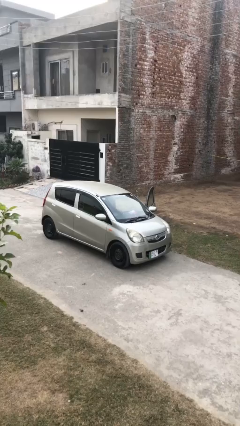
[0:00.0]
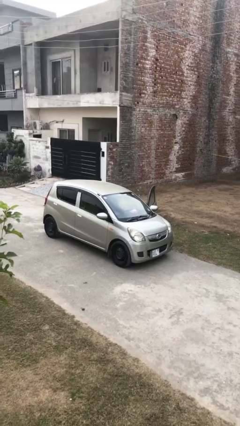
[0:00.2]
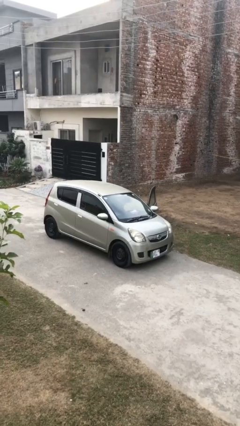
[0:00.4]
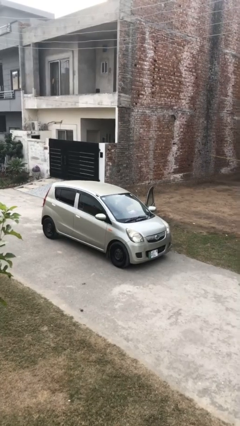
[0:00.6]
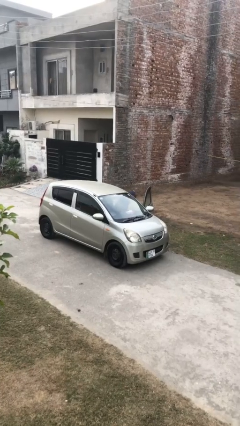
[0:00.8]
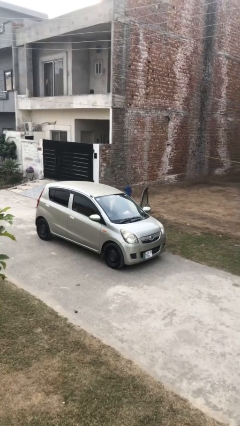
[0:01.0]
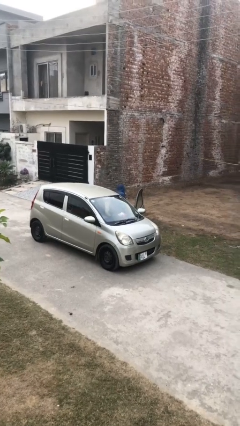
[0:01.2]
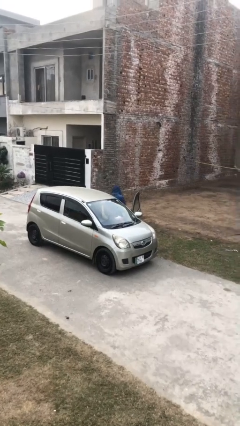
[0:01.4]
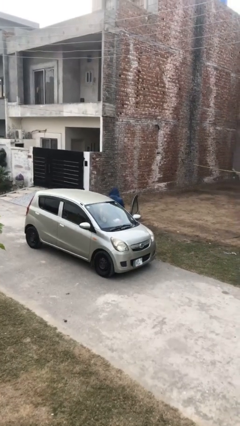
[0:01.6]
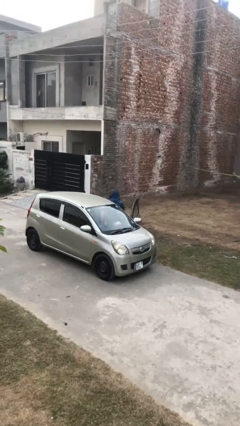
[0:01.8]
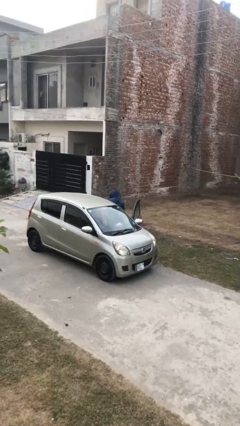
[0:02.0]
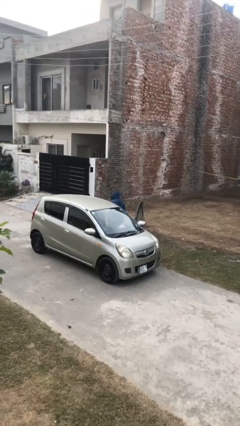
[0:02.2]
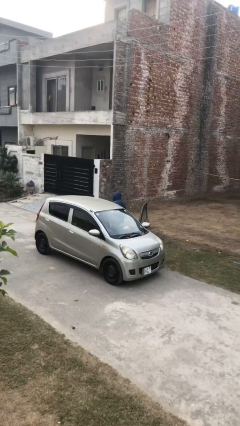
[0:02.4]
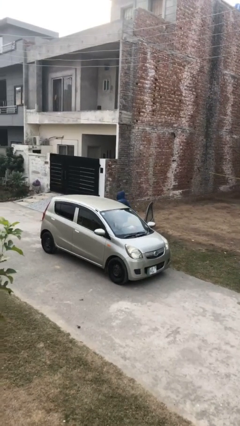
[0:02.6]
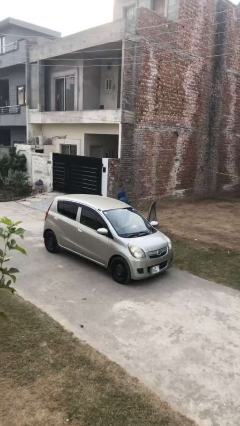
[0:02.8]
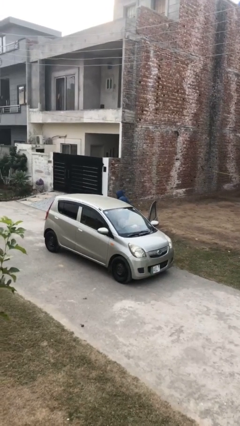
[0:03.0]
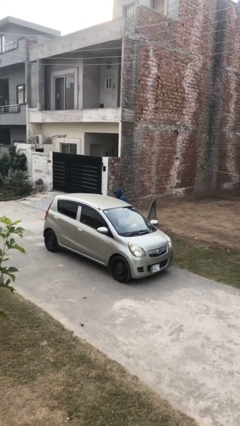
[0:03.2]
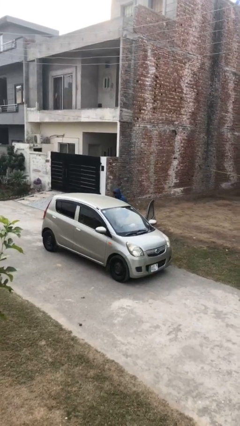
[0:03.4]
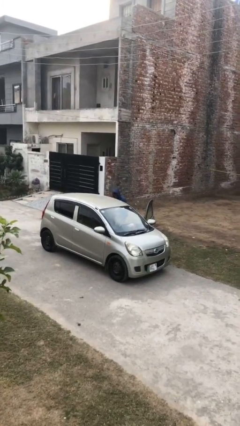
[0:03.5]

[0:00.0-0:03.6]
person exits car

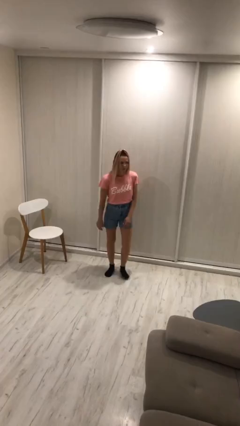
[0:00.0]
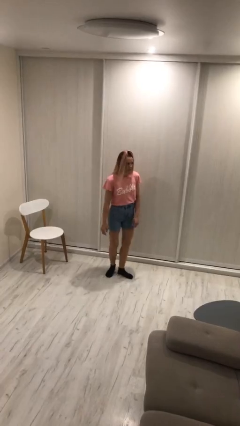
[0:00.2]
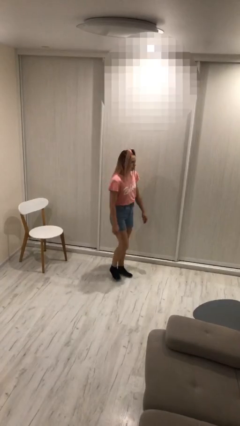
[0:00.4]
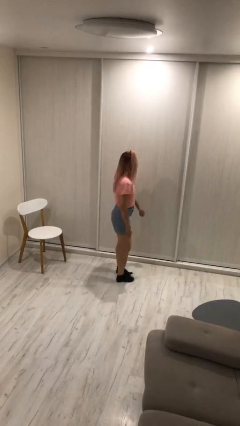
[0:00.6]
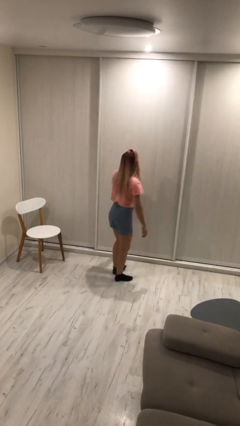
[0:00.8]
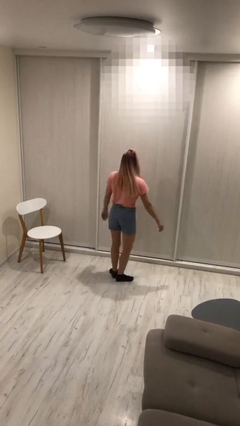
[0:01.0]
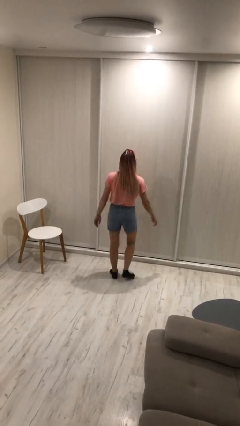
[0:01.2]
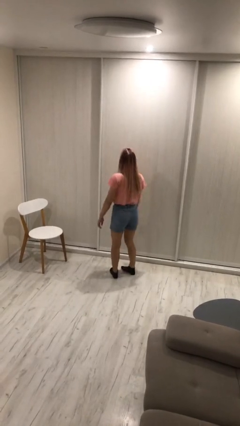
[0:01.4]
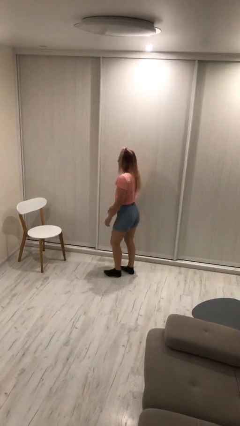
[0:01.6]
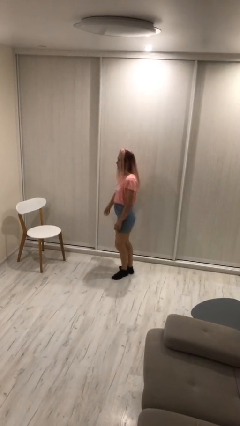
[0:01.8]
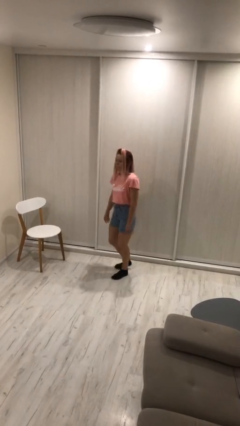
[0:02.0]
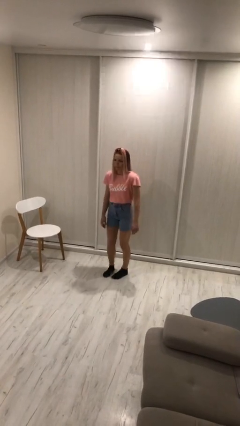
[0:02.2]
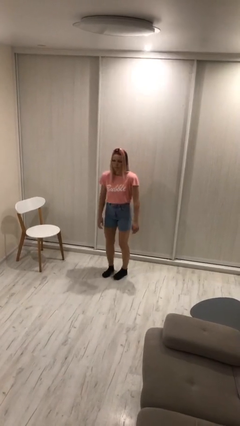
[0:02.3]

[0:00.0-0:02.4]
person twirls

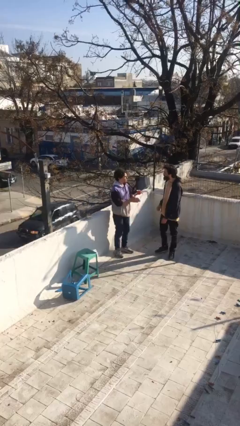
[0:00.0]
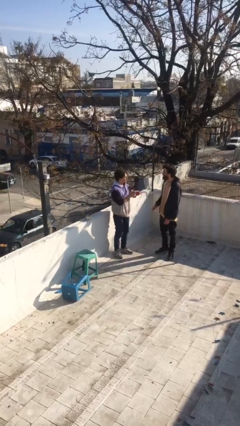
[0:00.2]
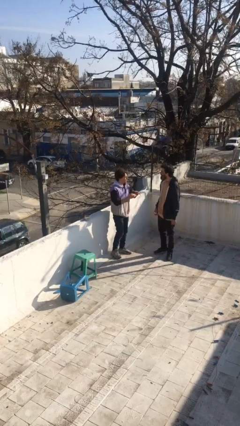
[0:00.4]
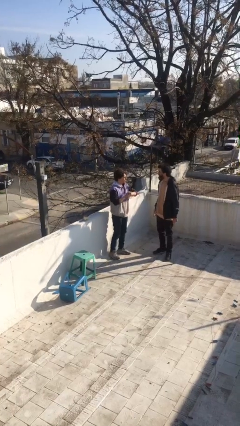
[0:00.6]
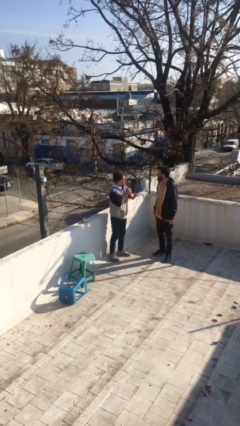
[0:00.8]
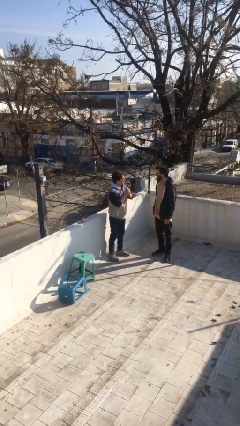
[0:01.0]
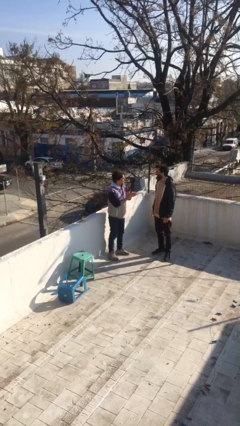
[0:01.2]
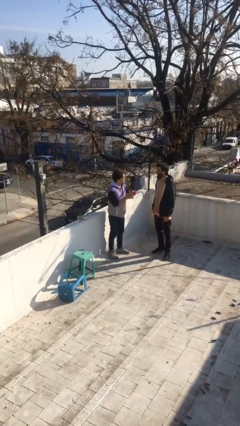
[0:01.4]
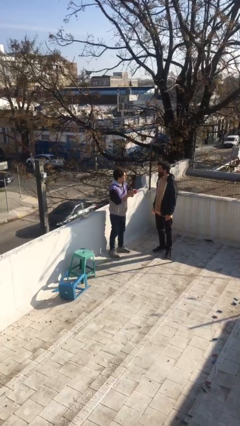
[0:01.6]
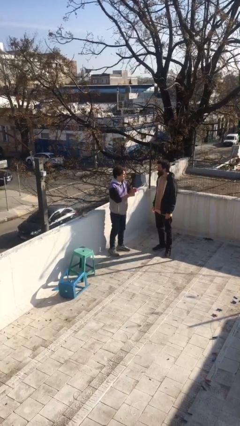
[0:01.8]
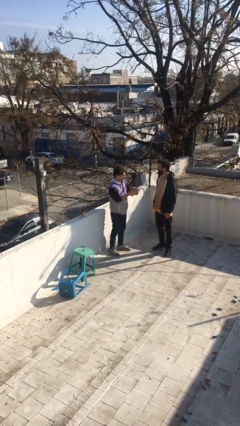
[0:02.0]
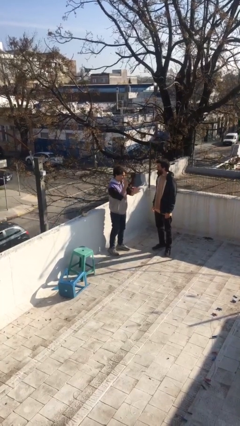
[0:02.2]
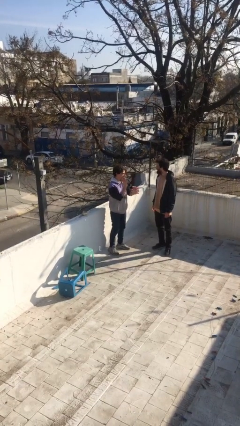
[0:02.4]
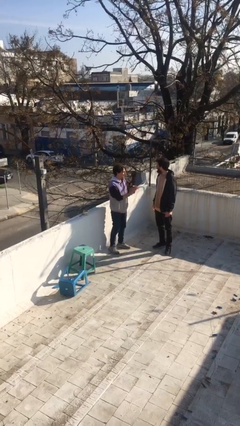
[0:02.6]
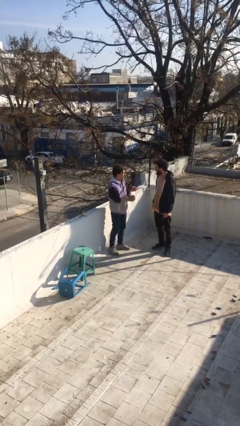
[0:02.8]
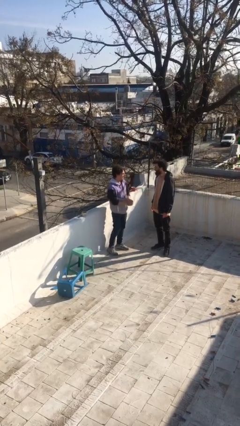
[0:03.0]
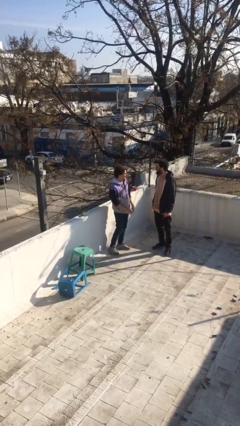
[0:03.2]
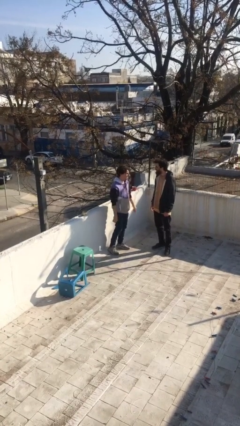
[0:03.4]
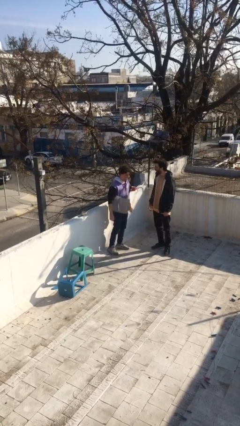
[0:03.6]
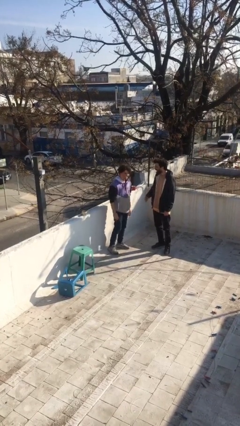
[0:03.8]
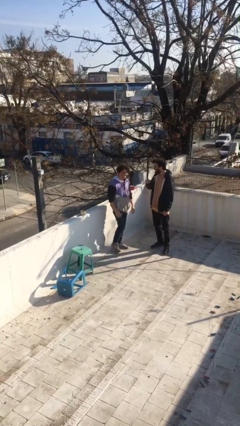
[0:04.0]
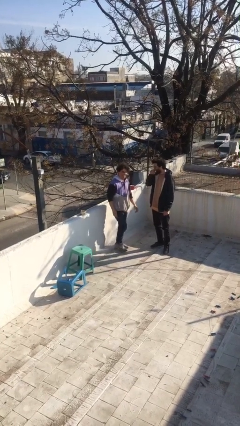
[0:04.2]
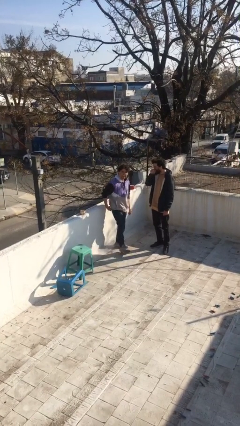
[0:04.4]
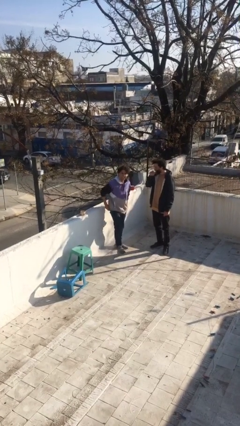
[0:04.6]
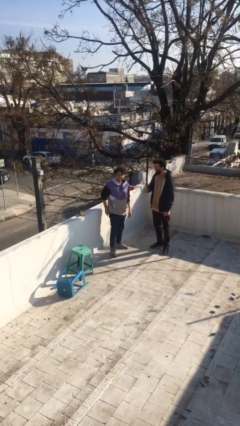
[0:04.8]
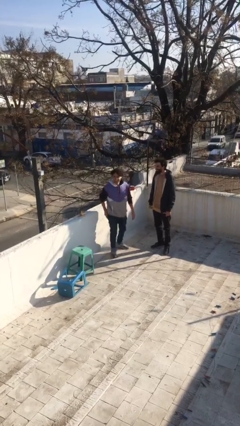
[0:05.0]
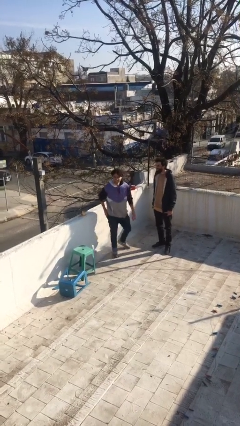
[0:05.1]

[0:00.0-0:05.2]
person talks to person

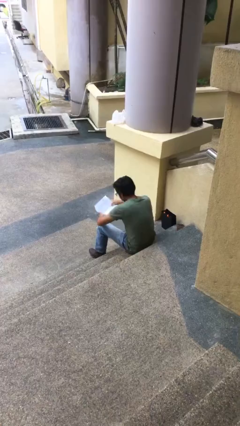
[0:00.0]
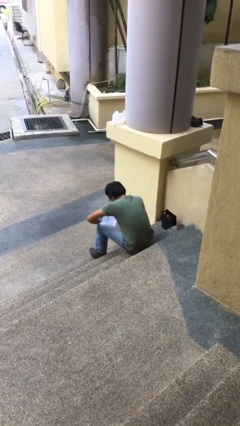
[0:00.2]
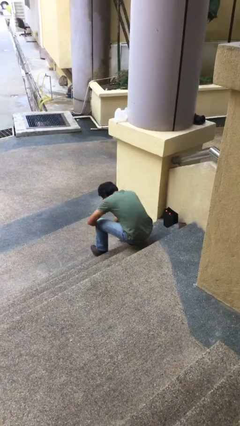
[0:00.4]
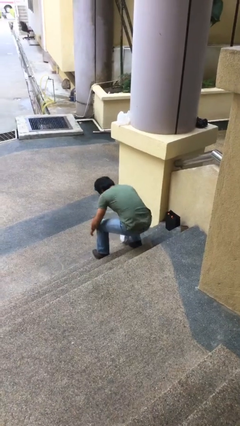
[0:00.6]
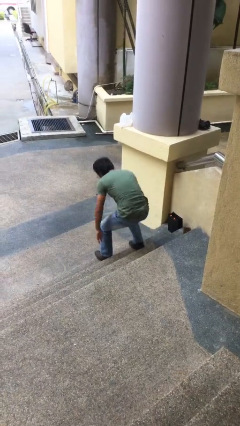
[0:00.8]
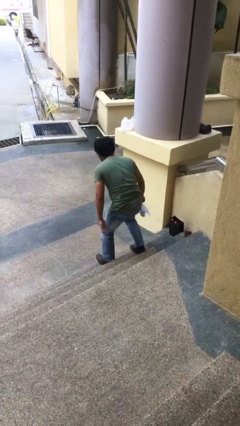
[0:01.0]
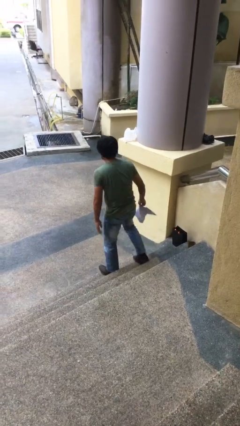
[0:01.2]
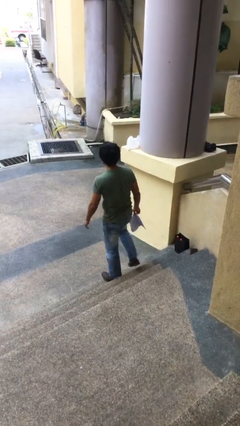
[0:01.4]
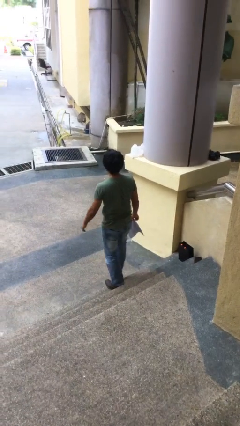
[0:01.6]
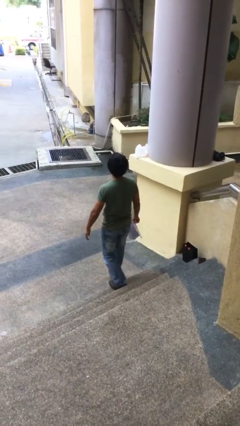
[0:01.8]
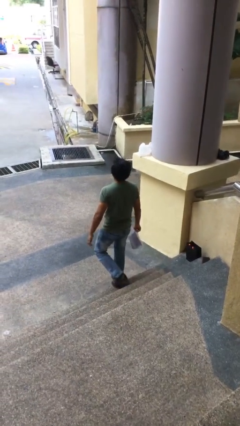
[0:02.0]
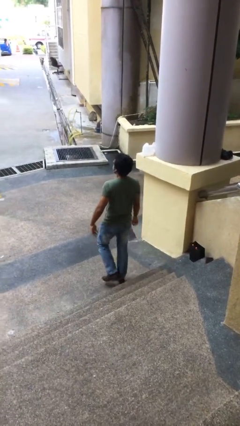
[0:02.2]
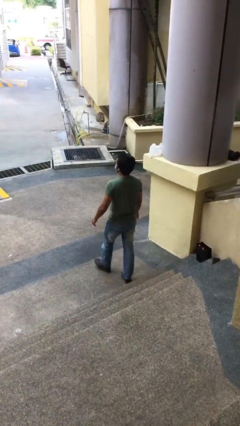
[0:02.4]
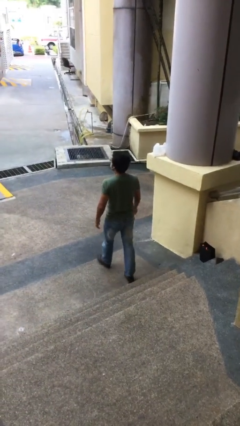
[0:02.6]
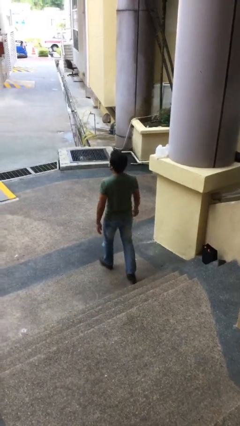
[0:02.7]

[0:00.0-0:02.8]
person stands up

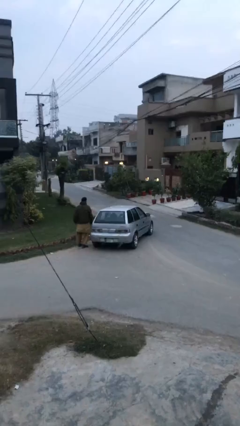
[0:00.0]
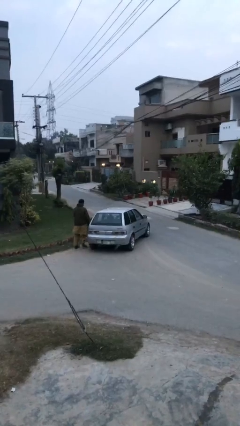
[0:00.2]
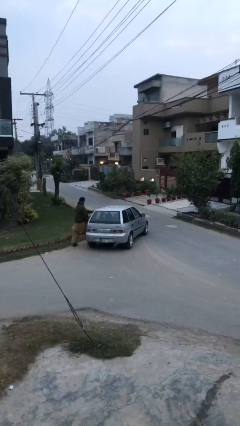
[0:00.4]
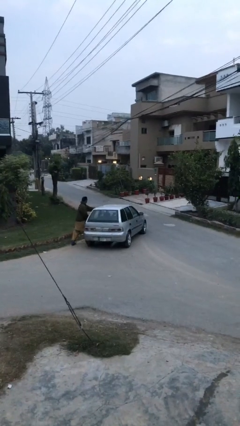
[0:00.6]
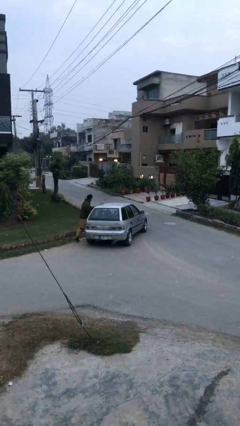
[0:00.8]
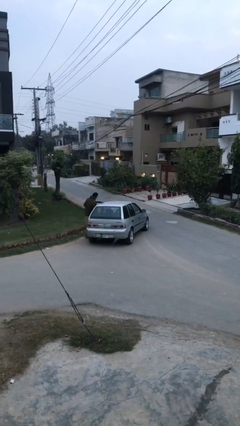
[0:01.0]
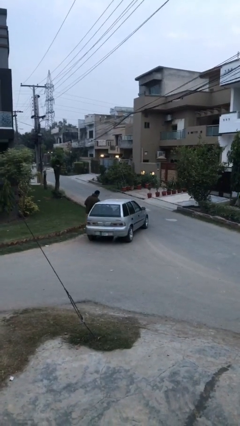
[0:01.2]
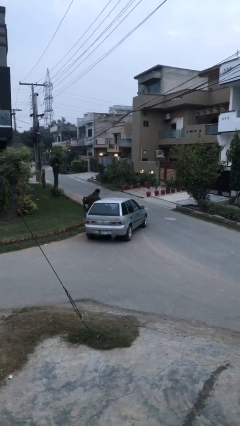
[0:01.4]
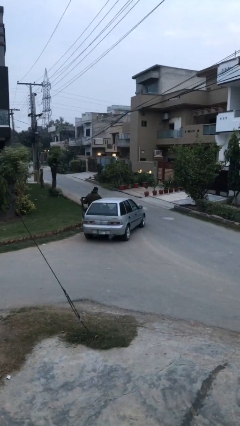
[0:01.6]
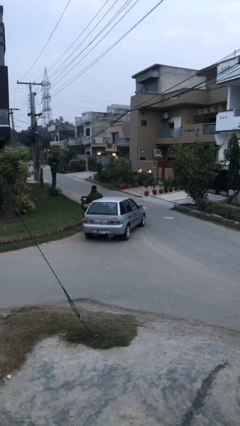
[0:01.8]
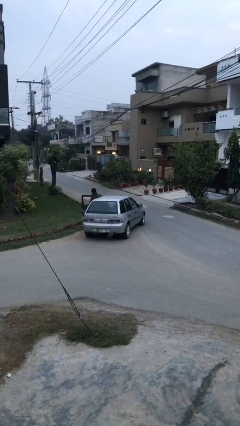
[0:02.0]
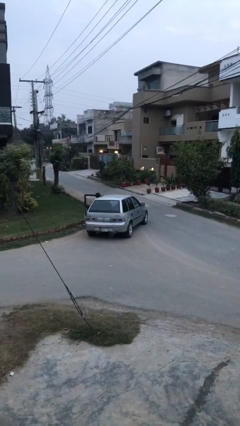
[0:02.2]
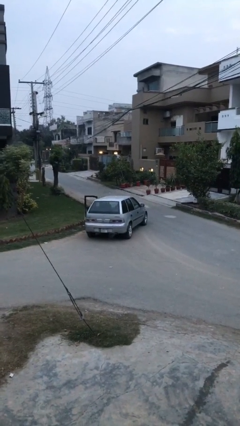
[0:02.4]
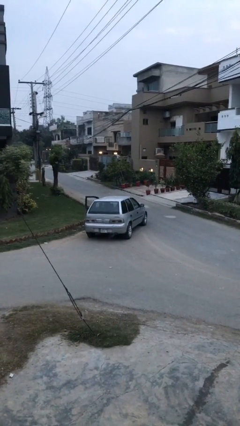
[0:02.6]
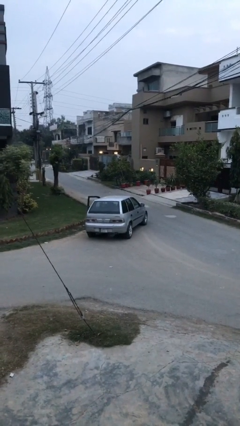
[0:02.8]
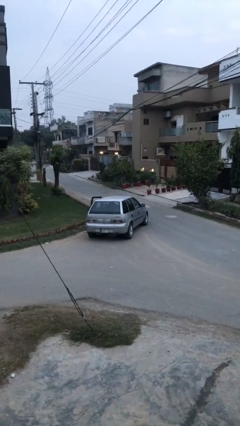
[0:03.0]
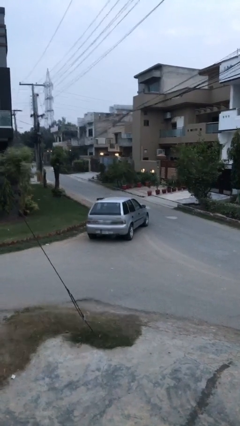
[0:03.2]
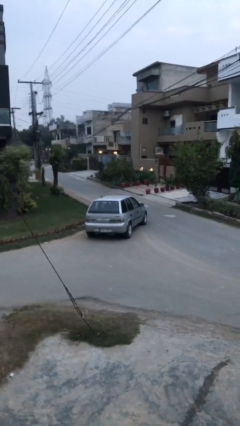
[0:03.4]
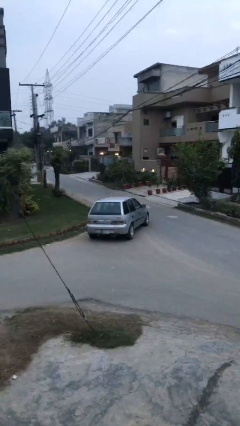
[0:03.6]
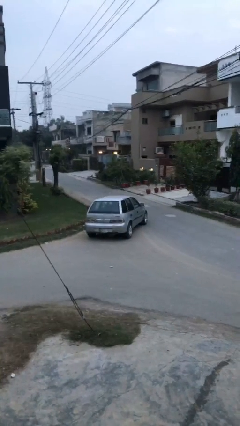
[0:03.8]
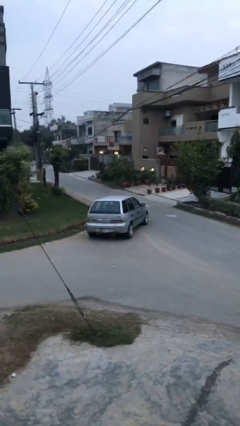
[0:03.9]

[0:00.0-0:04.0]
car picks up person
